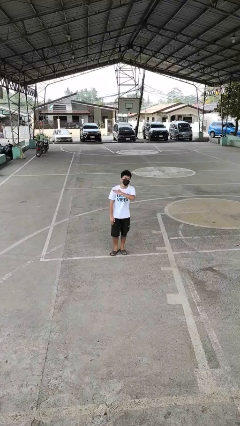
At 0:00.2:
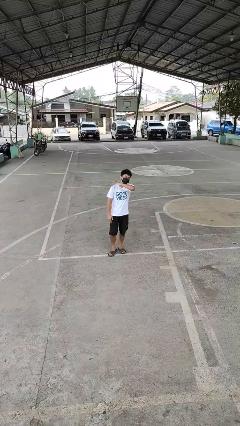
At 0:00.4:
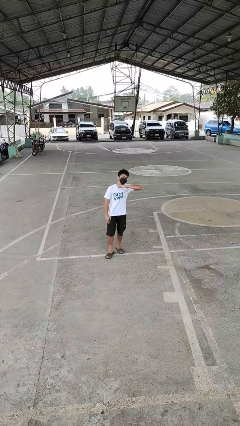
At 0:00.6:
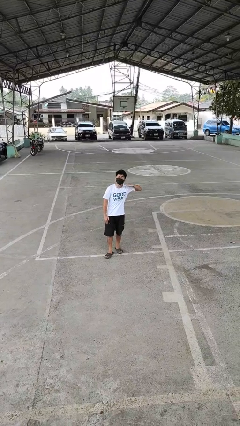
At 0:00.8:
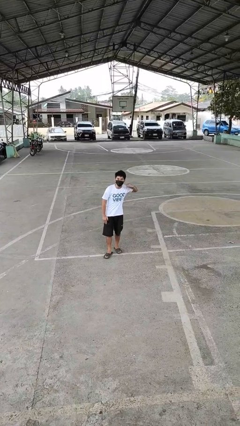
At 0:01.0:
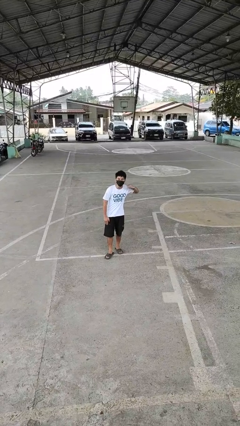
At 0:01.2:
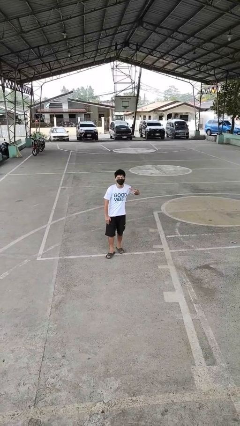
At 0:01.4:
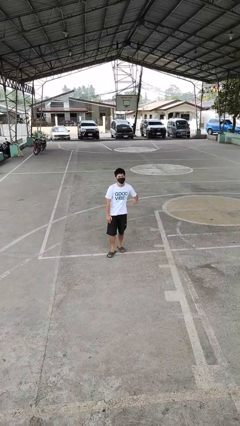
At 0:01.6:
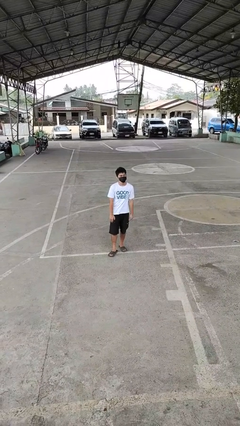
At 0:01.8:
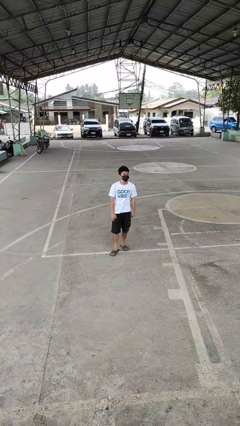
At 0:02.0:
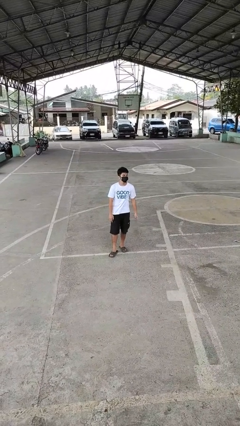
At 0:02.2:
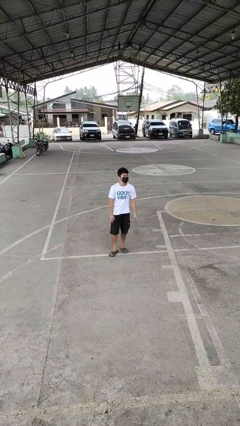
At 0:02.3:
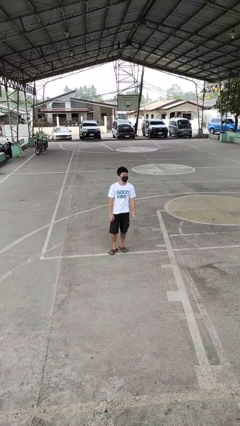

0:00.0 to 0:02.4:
person gestures cut

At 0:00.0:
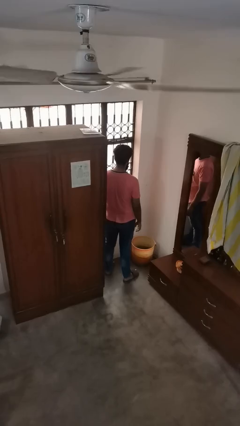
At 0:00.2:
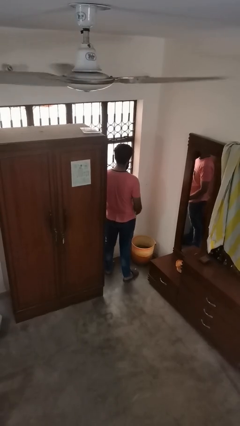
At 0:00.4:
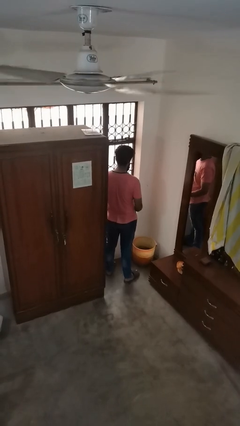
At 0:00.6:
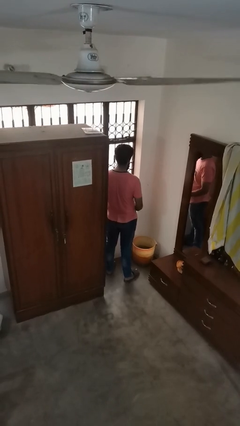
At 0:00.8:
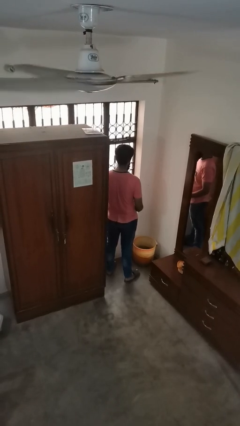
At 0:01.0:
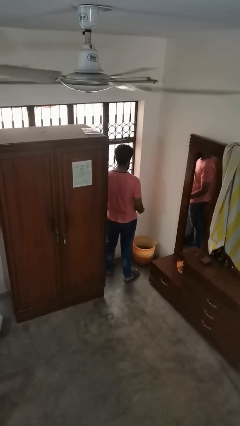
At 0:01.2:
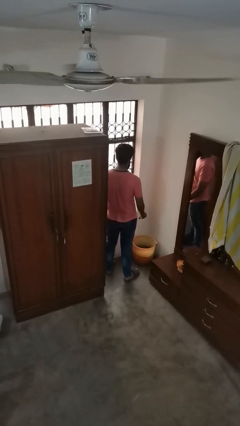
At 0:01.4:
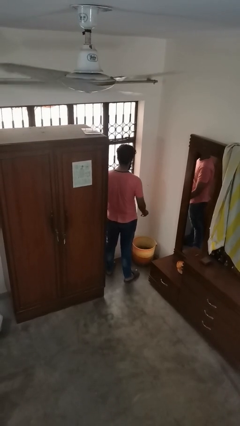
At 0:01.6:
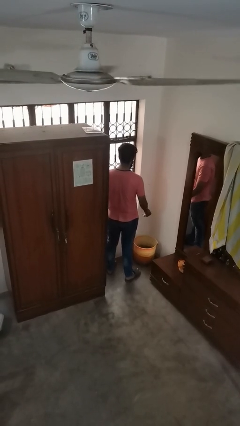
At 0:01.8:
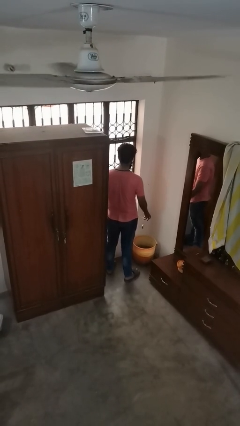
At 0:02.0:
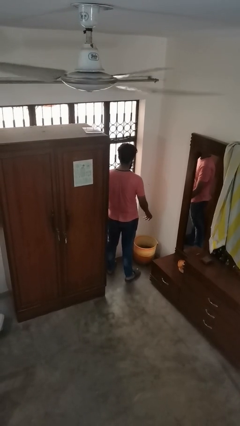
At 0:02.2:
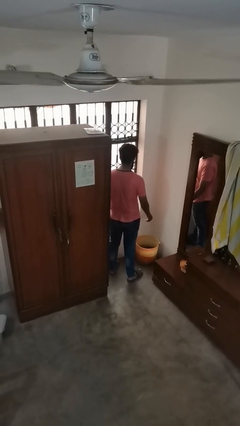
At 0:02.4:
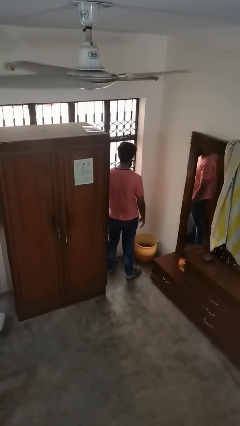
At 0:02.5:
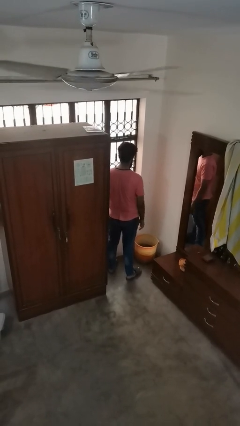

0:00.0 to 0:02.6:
person discards trash

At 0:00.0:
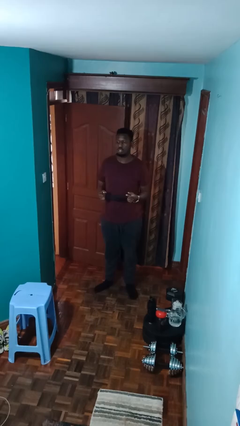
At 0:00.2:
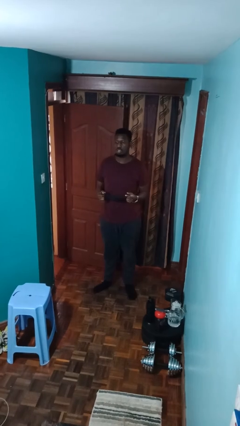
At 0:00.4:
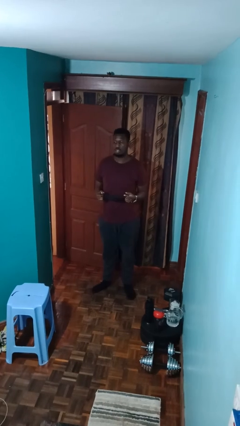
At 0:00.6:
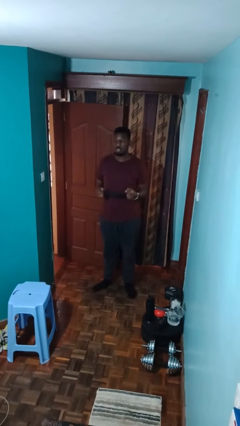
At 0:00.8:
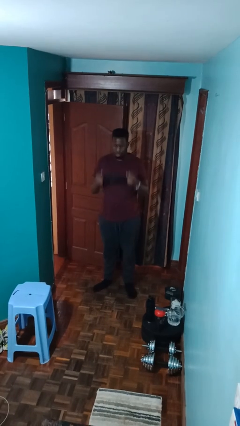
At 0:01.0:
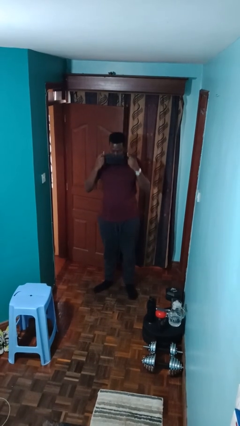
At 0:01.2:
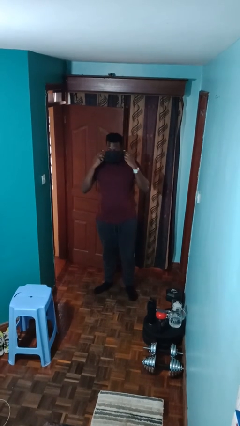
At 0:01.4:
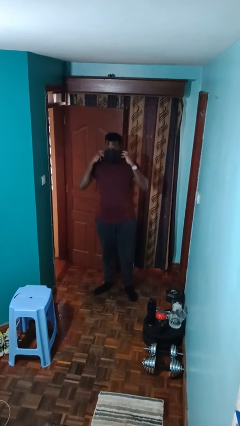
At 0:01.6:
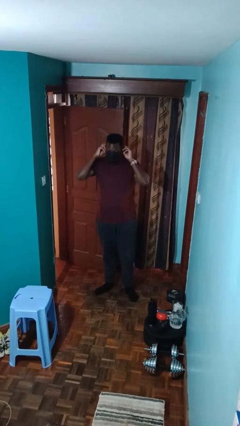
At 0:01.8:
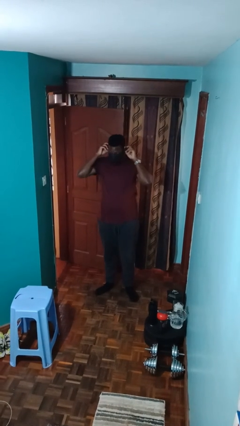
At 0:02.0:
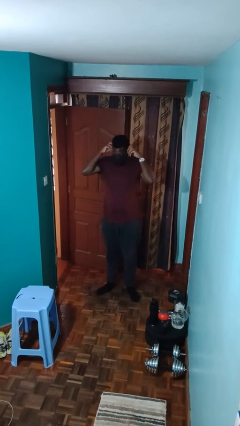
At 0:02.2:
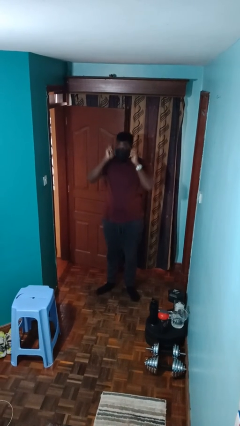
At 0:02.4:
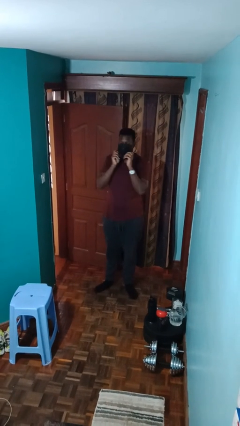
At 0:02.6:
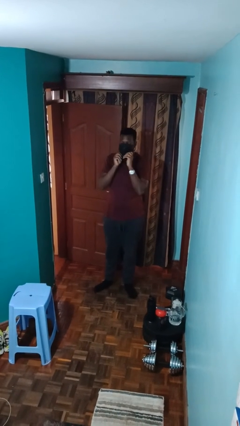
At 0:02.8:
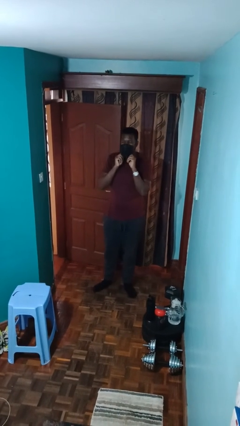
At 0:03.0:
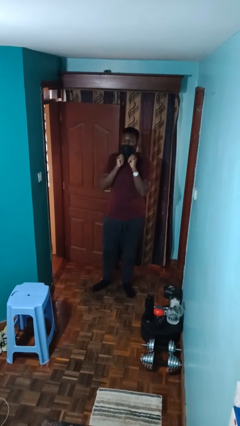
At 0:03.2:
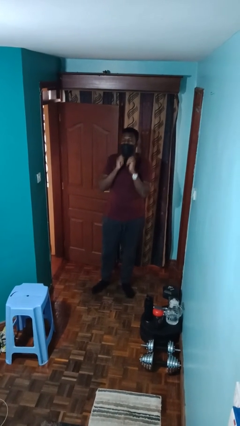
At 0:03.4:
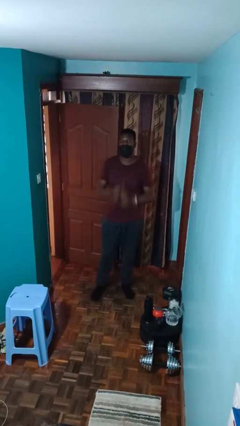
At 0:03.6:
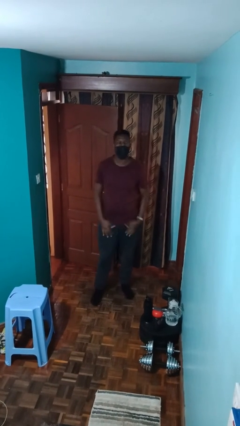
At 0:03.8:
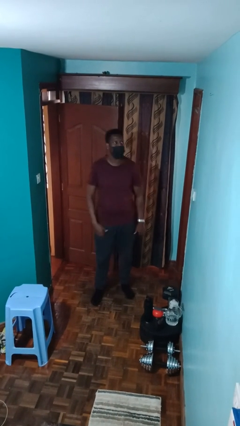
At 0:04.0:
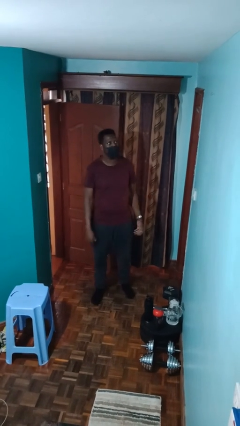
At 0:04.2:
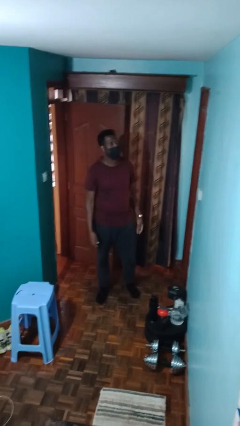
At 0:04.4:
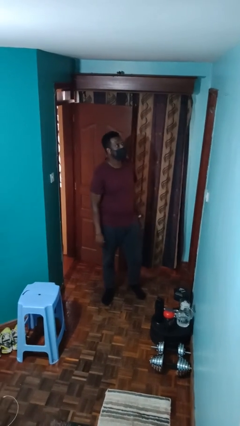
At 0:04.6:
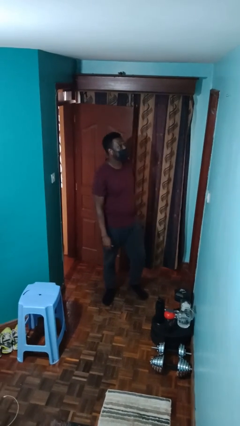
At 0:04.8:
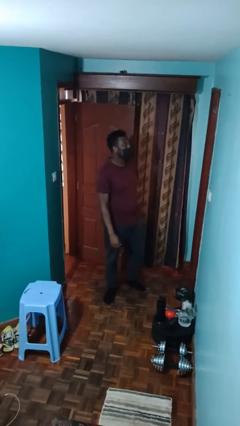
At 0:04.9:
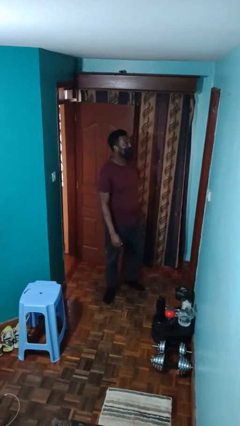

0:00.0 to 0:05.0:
person puts on facemask

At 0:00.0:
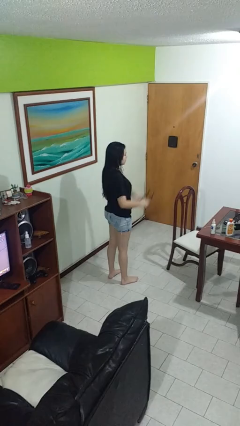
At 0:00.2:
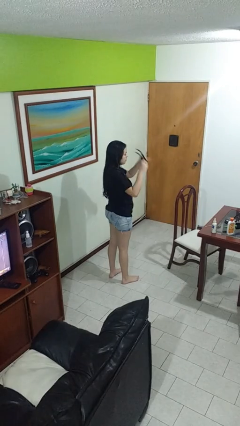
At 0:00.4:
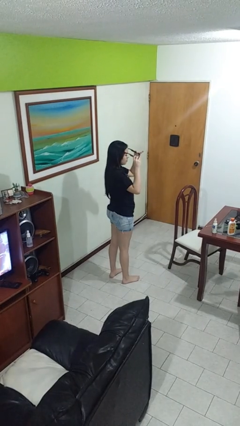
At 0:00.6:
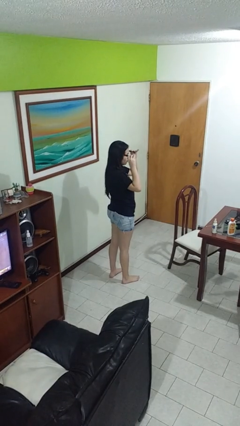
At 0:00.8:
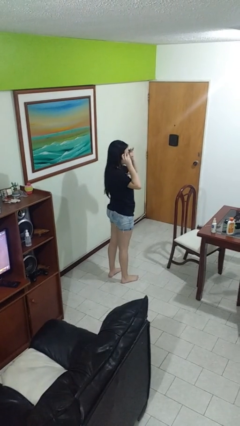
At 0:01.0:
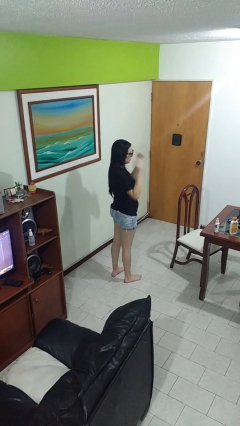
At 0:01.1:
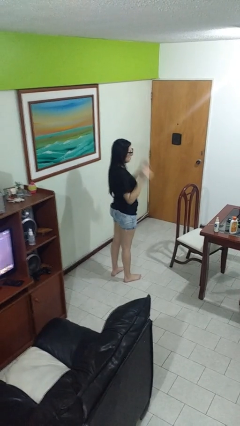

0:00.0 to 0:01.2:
person puts on sunglasses

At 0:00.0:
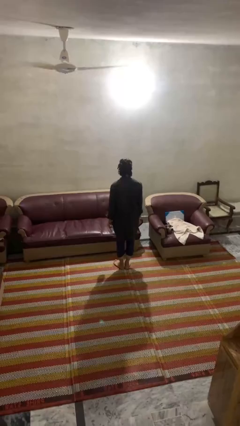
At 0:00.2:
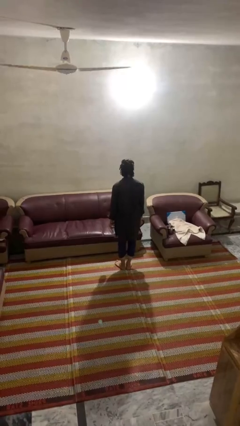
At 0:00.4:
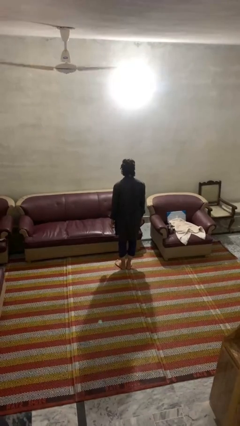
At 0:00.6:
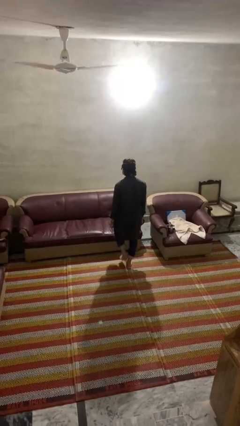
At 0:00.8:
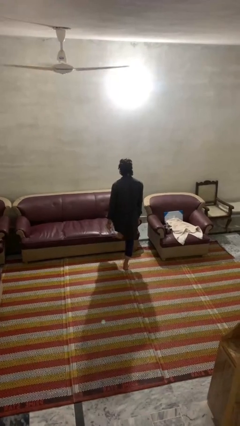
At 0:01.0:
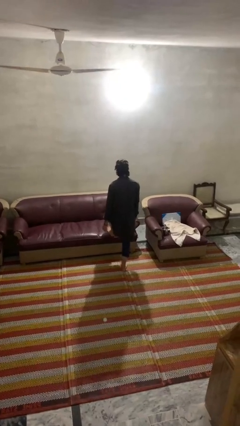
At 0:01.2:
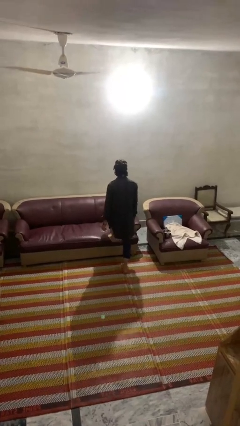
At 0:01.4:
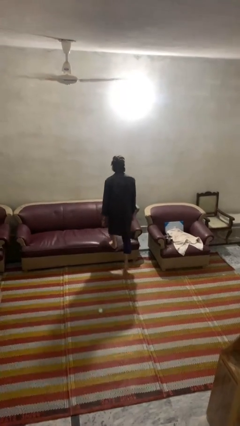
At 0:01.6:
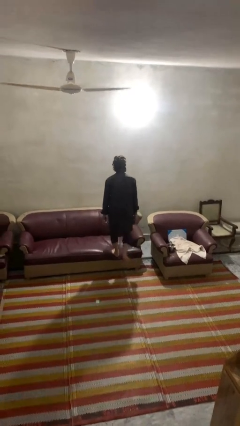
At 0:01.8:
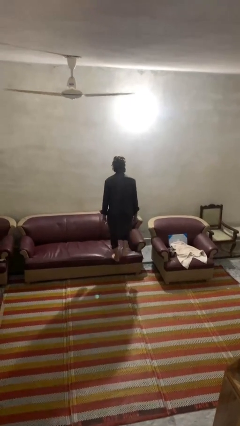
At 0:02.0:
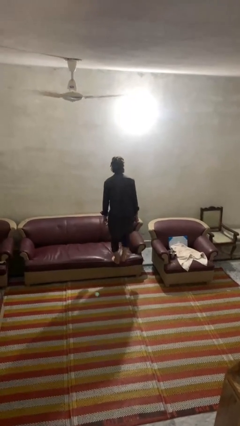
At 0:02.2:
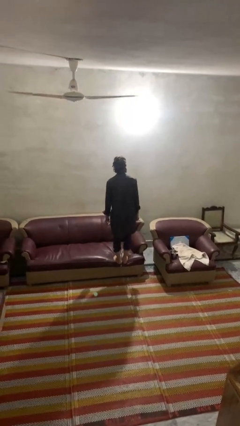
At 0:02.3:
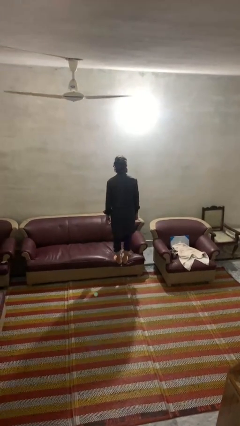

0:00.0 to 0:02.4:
person climbs on couch

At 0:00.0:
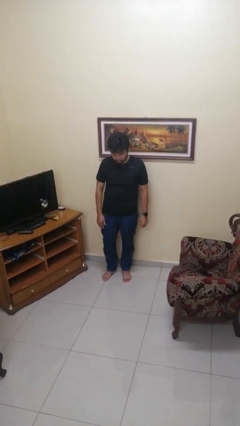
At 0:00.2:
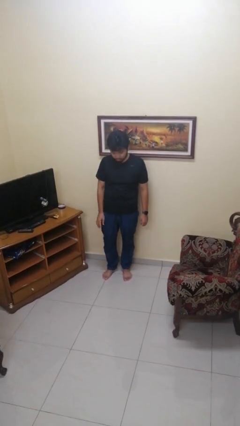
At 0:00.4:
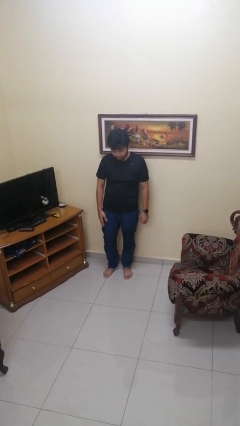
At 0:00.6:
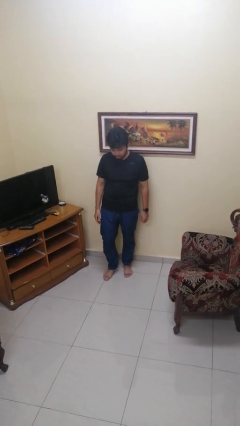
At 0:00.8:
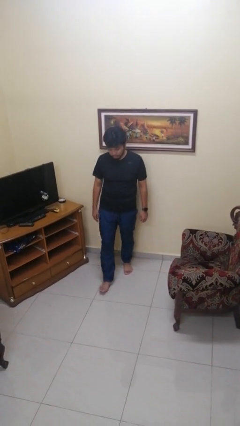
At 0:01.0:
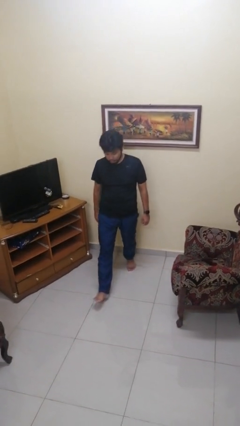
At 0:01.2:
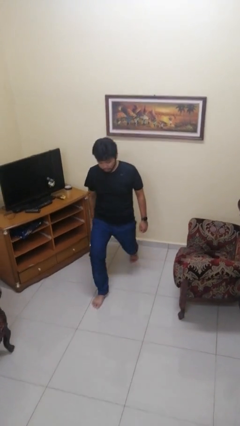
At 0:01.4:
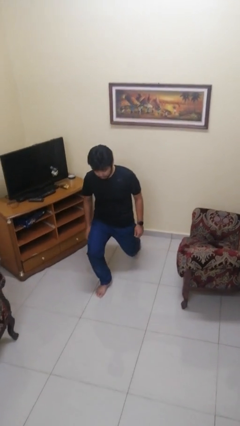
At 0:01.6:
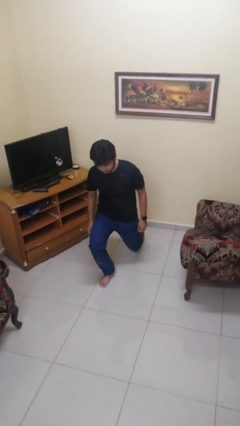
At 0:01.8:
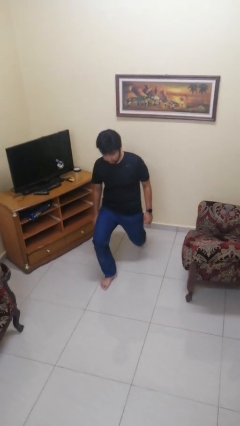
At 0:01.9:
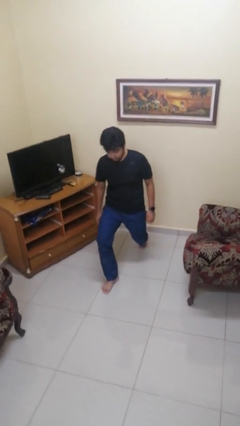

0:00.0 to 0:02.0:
person exercises with lunges

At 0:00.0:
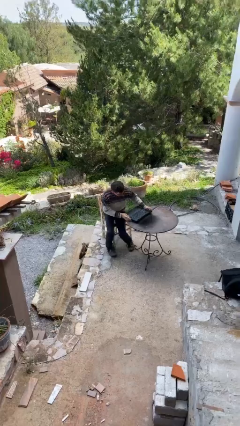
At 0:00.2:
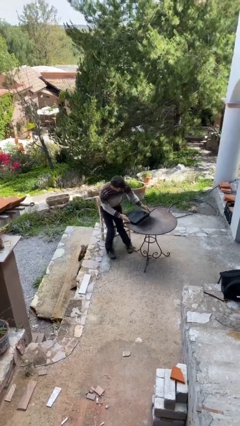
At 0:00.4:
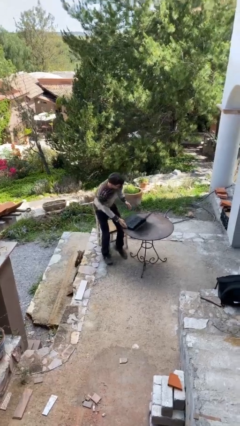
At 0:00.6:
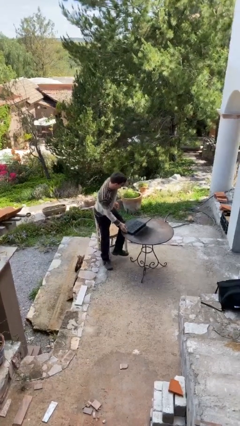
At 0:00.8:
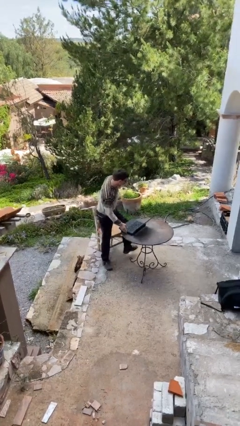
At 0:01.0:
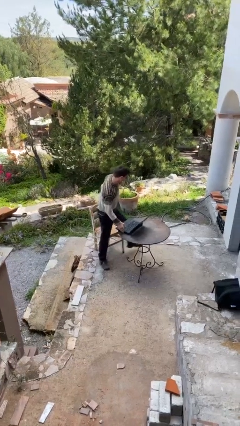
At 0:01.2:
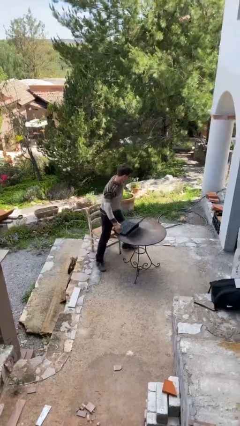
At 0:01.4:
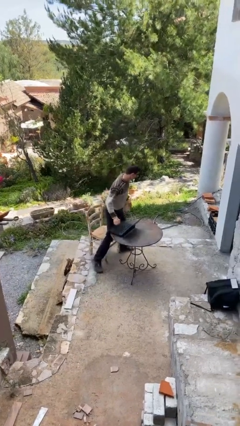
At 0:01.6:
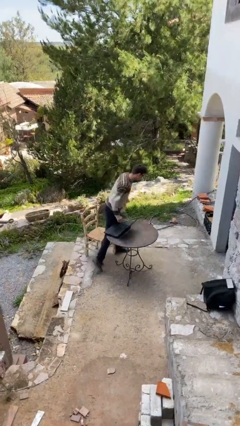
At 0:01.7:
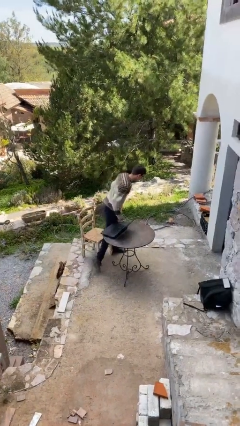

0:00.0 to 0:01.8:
person stands up
